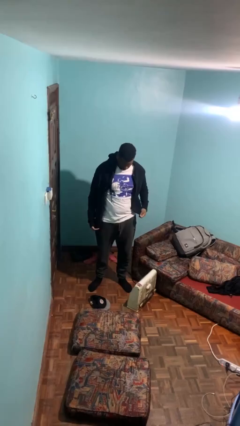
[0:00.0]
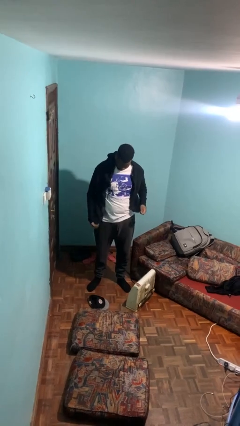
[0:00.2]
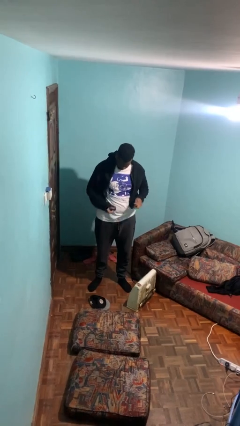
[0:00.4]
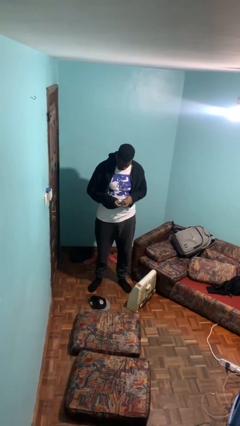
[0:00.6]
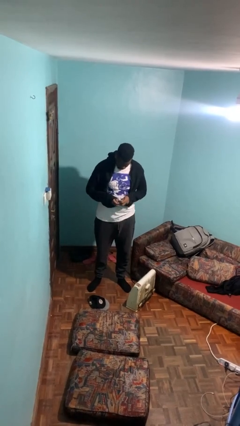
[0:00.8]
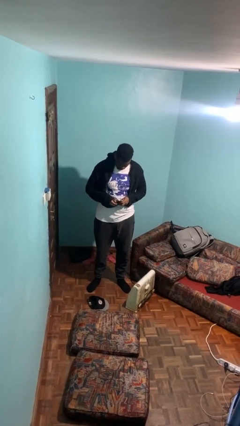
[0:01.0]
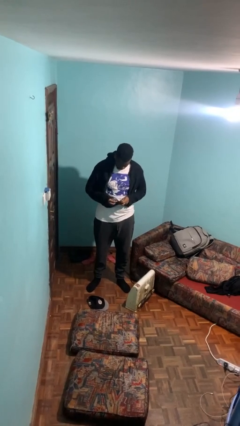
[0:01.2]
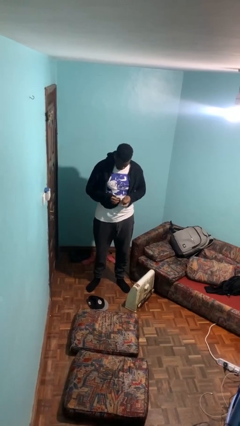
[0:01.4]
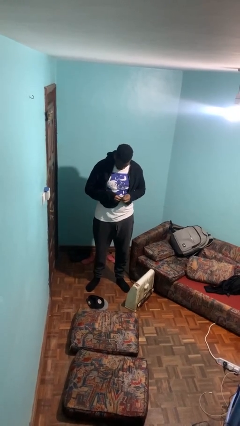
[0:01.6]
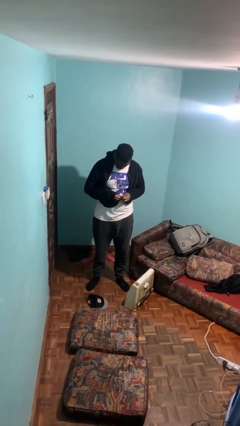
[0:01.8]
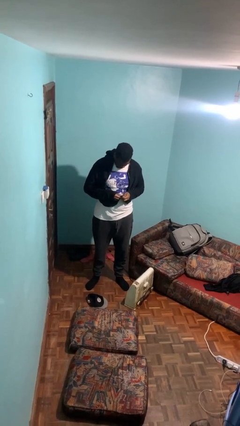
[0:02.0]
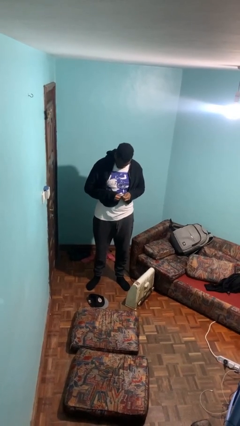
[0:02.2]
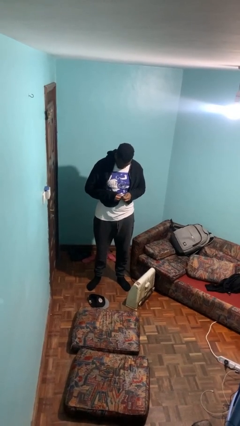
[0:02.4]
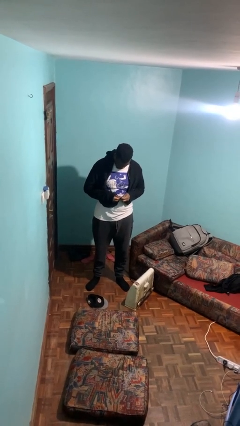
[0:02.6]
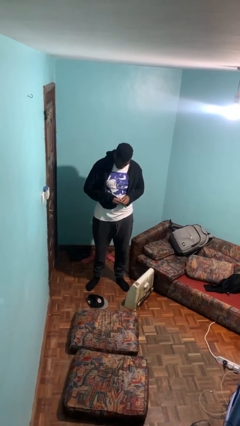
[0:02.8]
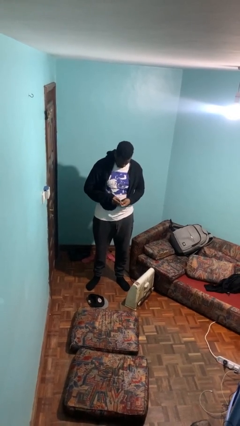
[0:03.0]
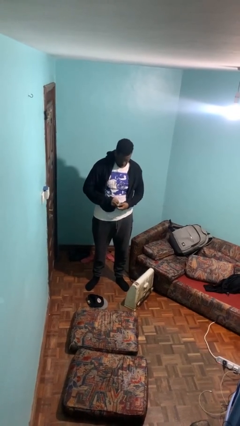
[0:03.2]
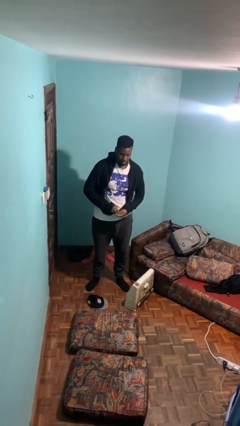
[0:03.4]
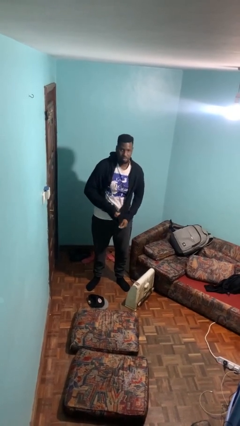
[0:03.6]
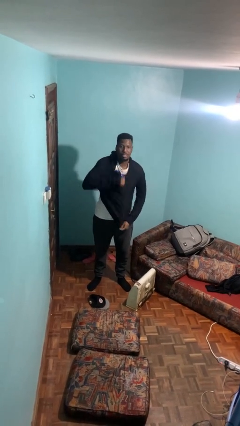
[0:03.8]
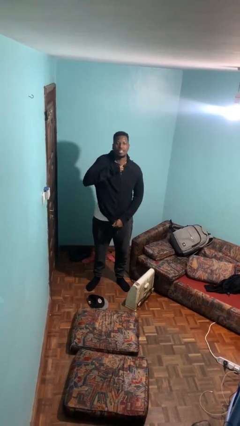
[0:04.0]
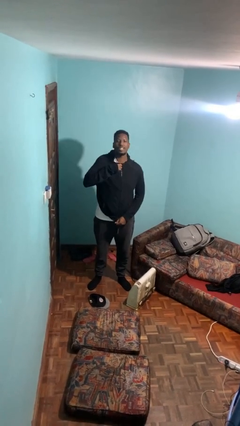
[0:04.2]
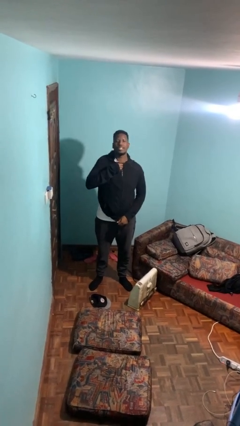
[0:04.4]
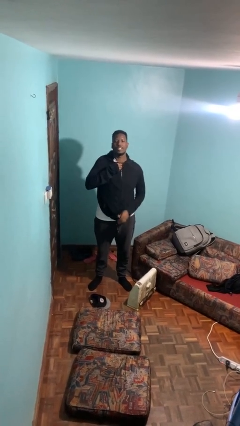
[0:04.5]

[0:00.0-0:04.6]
person zips up jacket

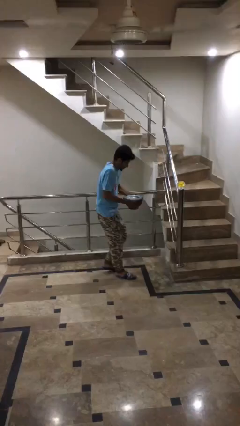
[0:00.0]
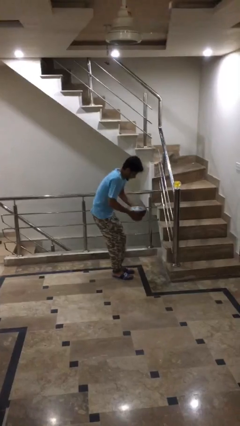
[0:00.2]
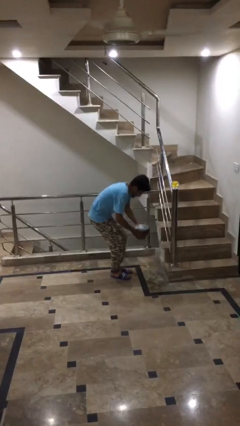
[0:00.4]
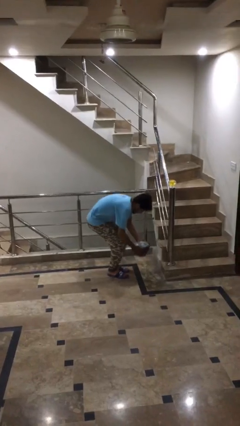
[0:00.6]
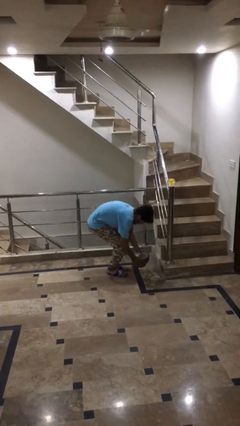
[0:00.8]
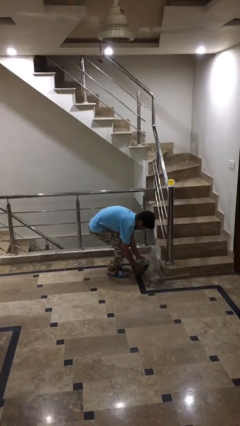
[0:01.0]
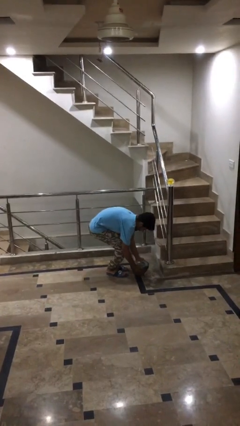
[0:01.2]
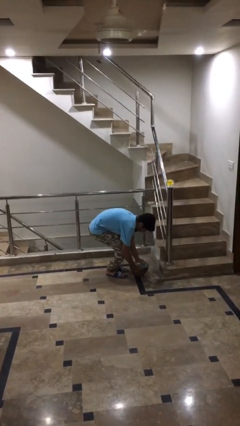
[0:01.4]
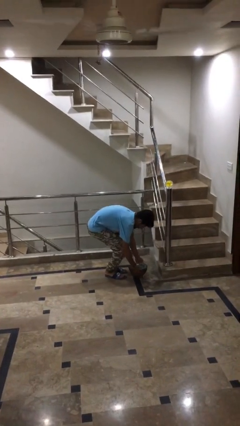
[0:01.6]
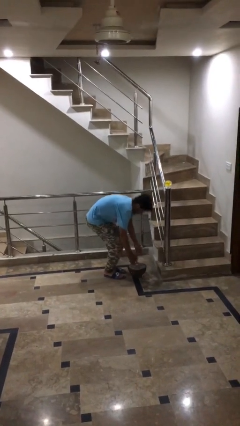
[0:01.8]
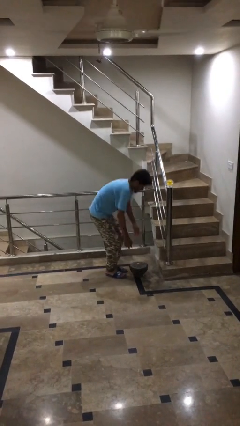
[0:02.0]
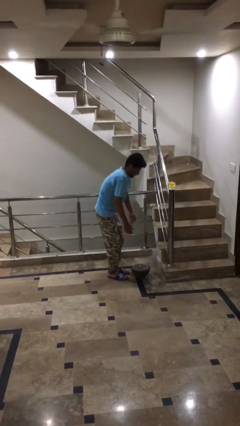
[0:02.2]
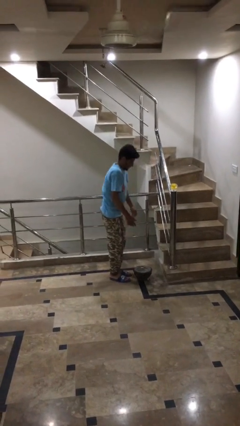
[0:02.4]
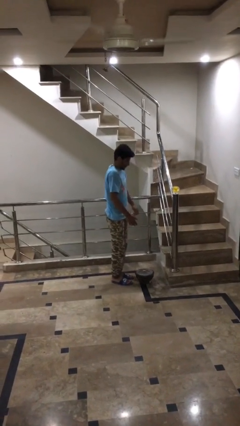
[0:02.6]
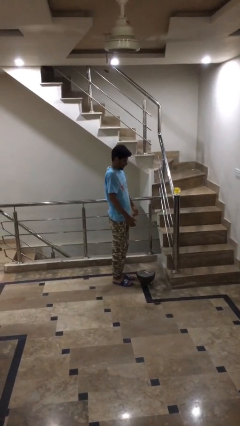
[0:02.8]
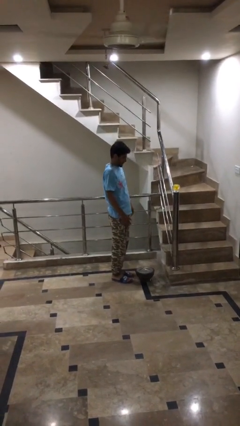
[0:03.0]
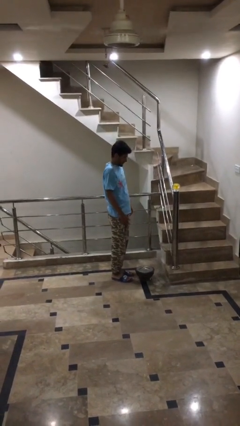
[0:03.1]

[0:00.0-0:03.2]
person puts down object on floor

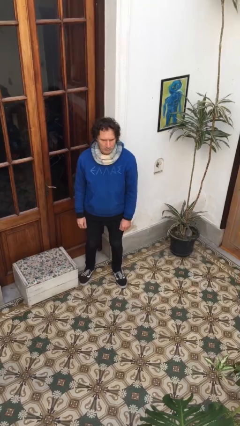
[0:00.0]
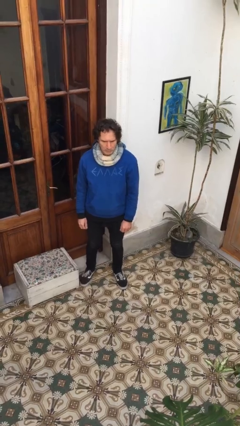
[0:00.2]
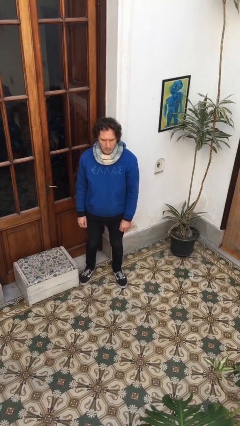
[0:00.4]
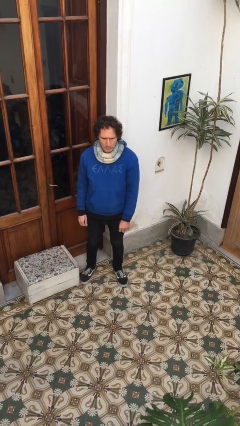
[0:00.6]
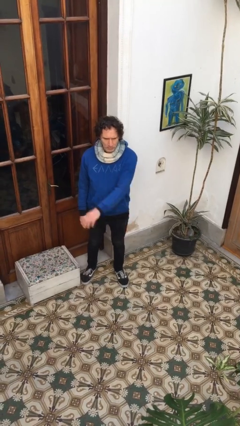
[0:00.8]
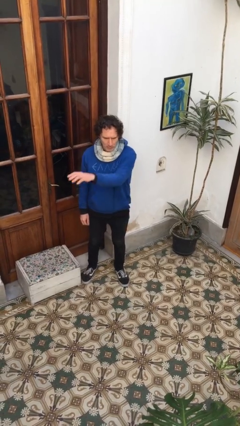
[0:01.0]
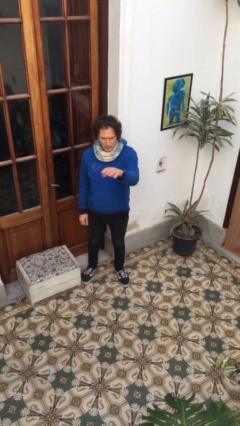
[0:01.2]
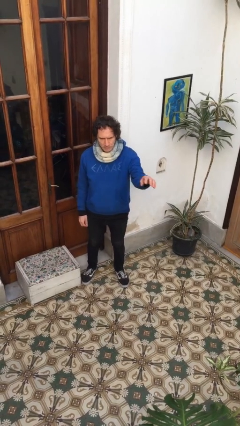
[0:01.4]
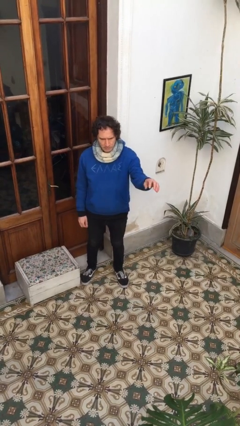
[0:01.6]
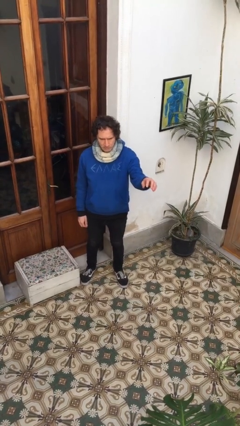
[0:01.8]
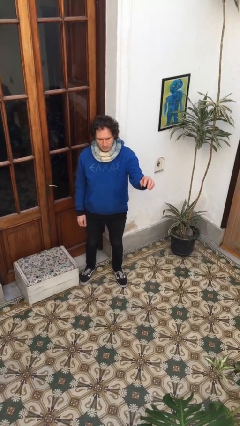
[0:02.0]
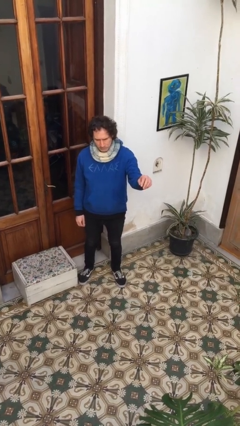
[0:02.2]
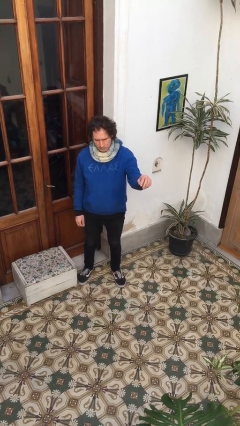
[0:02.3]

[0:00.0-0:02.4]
person gestures swipe left

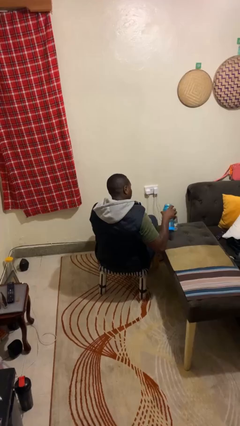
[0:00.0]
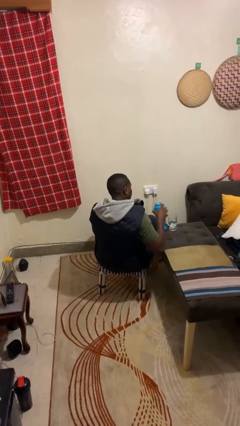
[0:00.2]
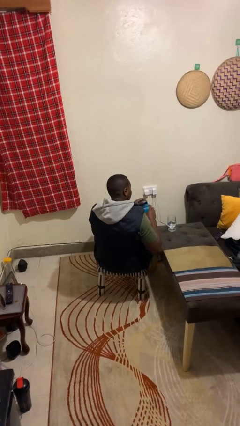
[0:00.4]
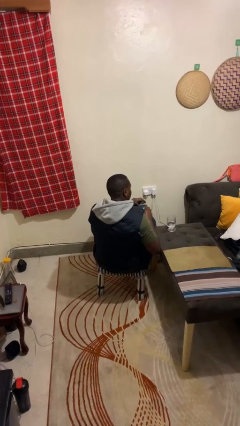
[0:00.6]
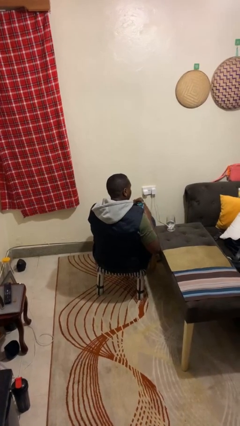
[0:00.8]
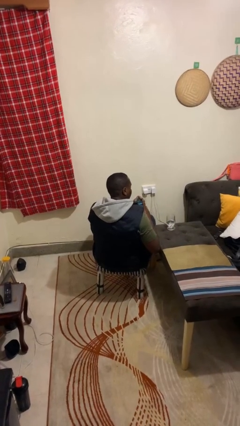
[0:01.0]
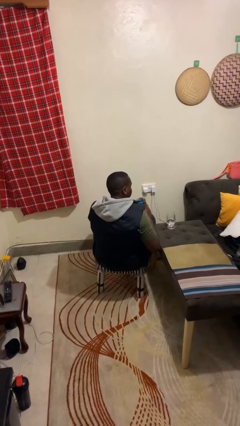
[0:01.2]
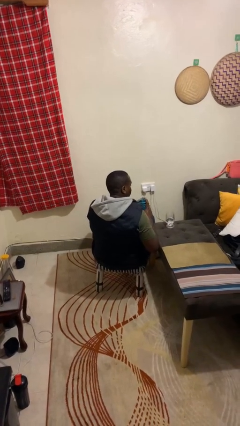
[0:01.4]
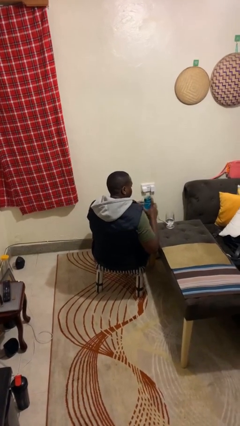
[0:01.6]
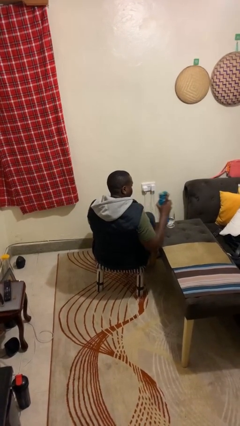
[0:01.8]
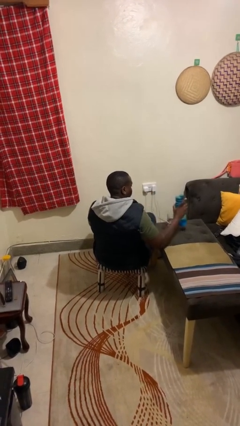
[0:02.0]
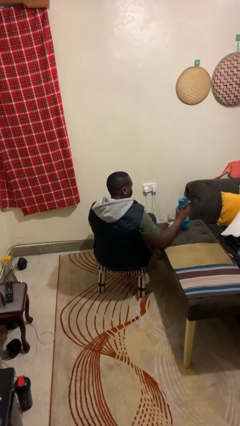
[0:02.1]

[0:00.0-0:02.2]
person screws lid to bottle

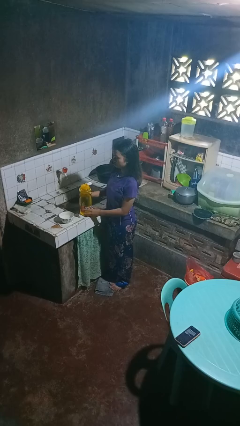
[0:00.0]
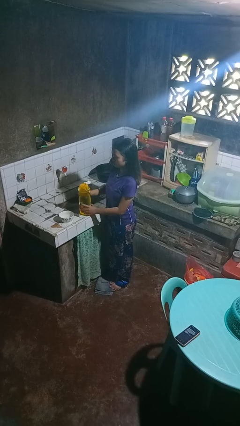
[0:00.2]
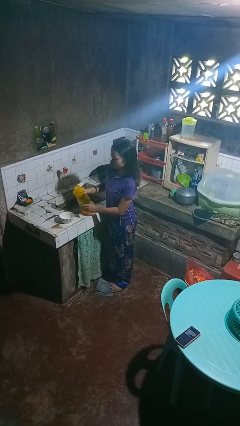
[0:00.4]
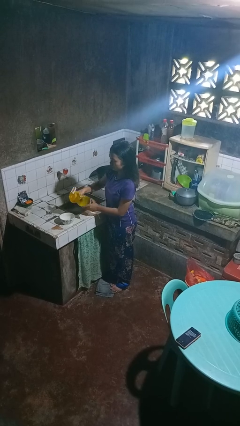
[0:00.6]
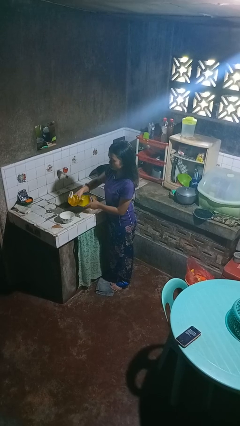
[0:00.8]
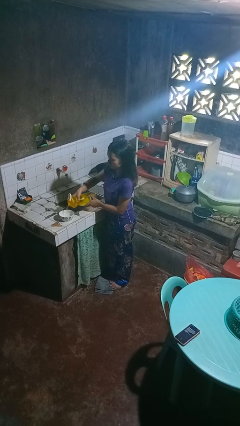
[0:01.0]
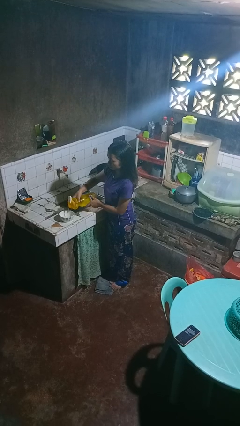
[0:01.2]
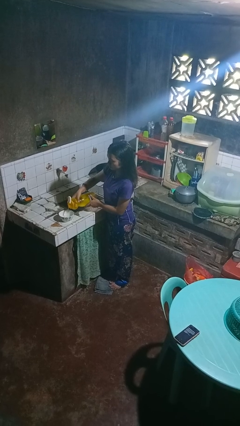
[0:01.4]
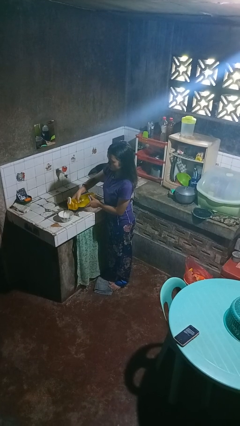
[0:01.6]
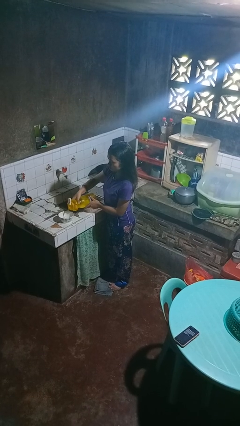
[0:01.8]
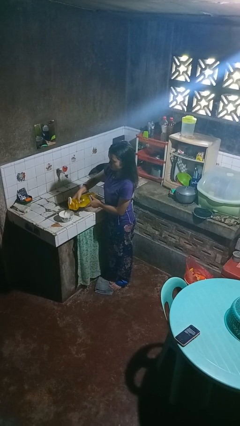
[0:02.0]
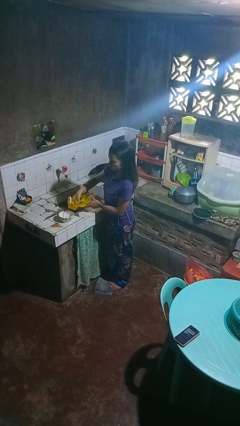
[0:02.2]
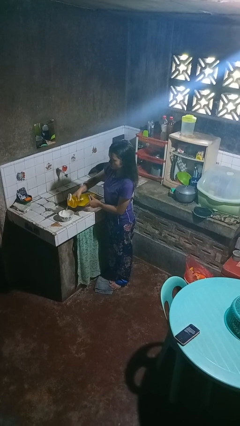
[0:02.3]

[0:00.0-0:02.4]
person pours into bowl

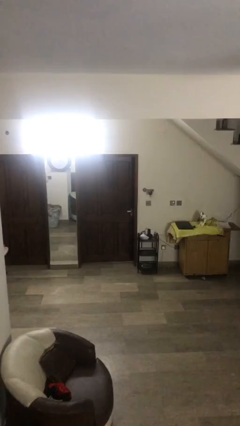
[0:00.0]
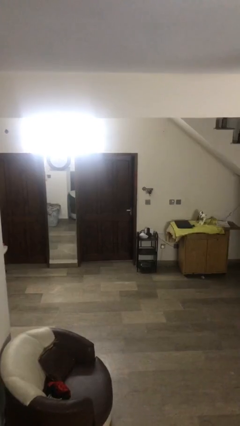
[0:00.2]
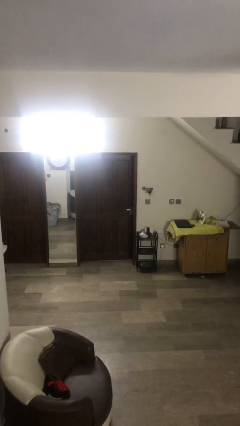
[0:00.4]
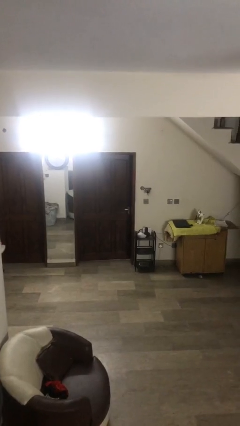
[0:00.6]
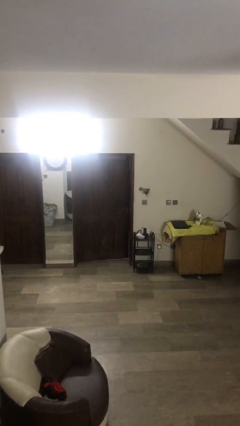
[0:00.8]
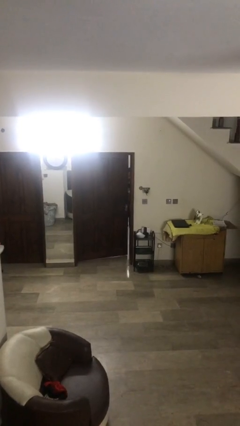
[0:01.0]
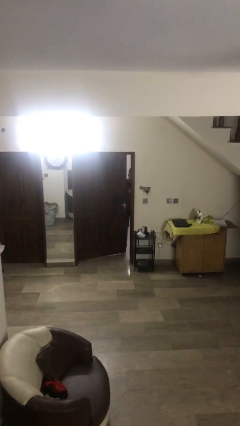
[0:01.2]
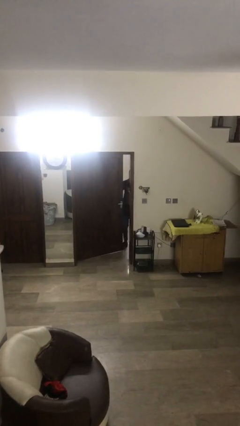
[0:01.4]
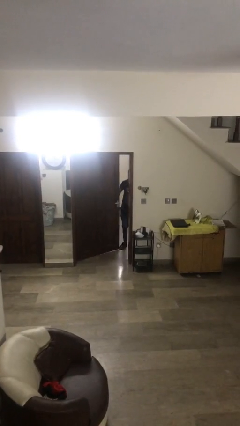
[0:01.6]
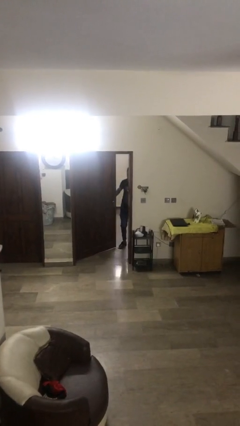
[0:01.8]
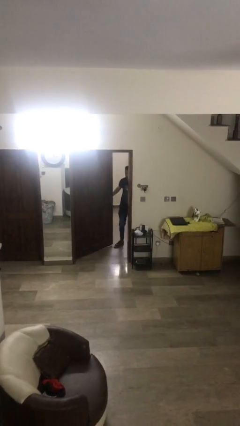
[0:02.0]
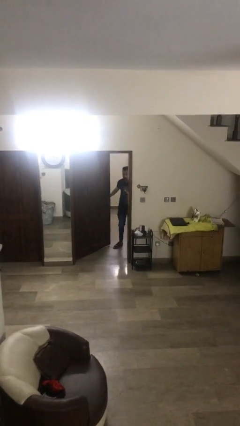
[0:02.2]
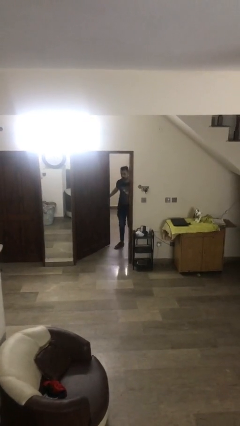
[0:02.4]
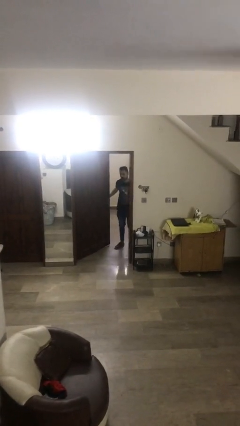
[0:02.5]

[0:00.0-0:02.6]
person opens facility door
